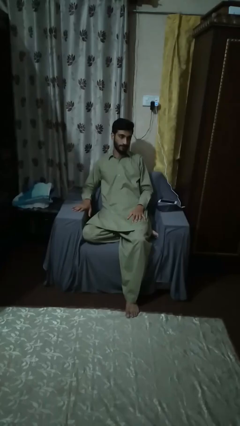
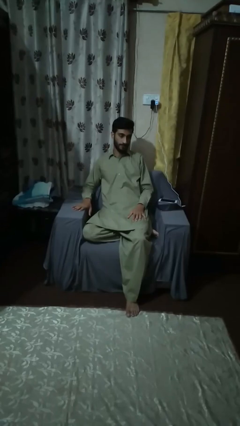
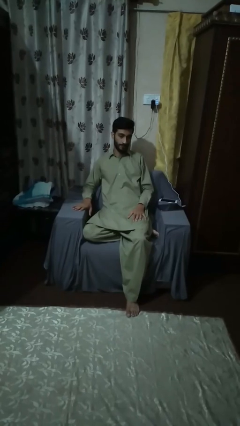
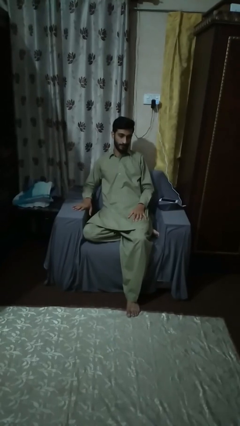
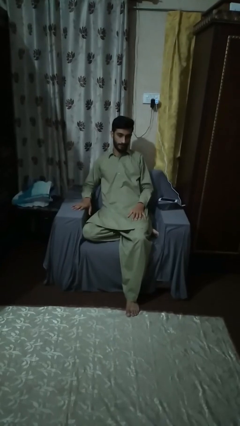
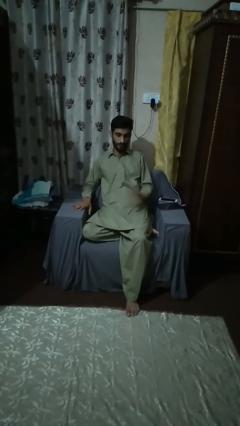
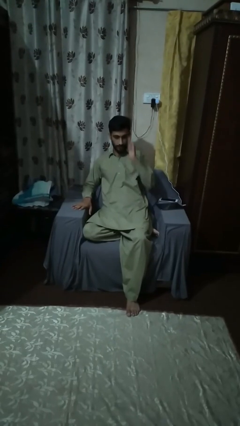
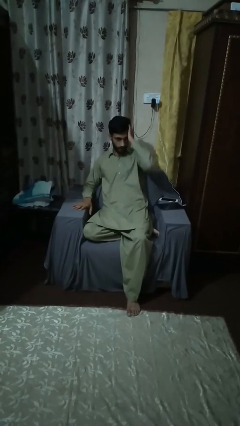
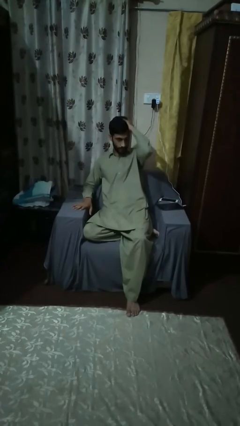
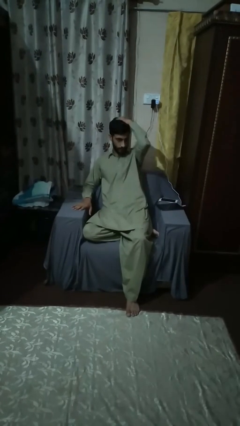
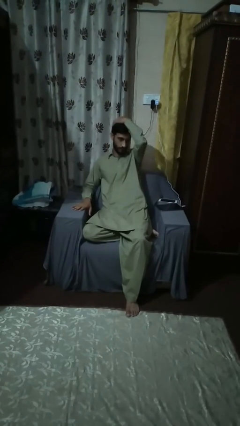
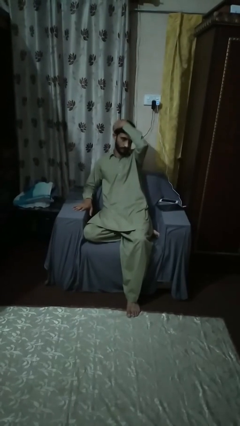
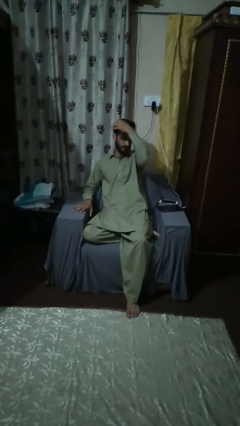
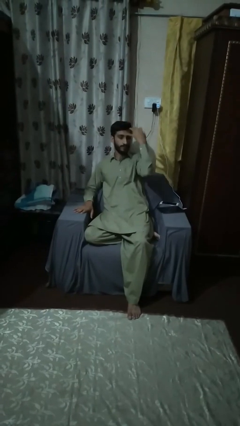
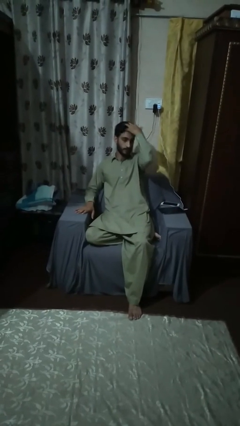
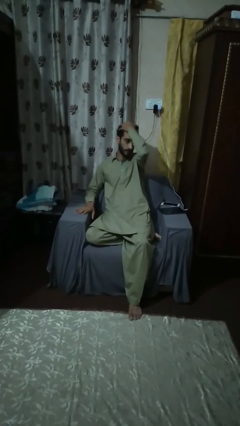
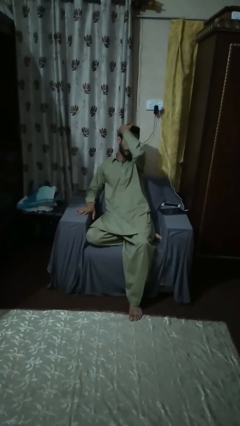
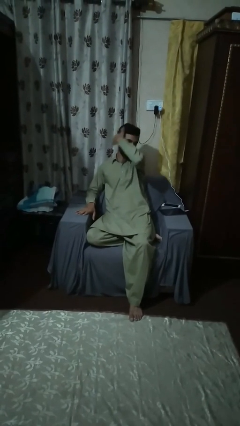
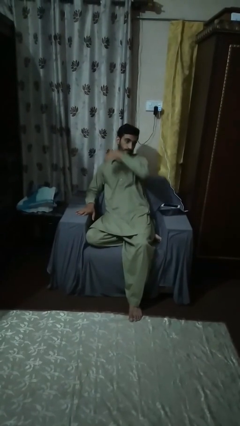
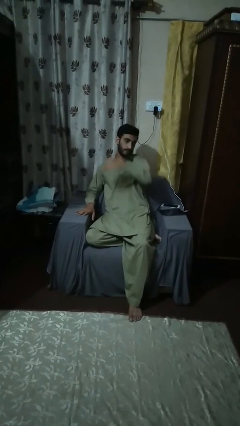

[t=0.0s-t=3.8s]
person strokes hair

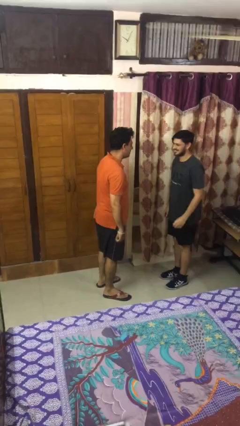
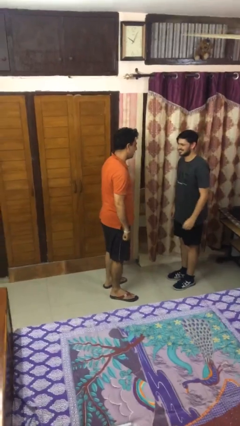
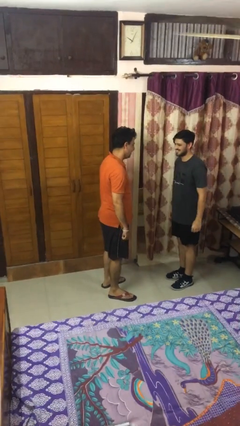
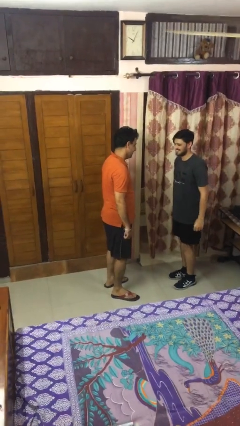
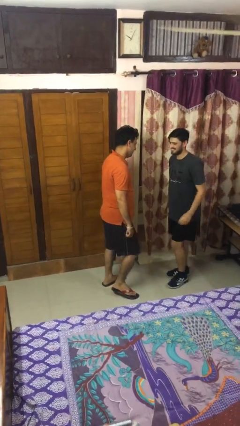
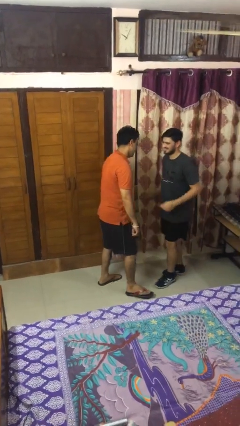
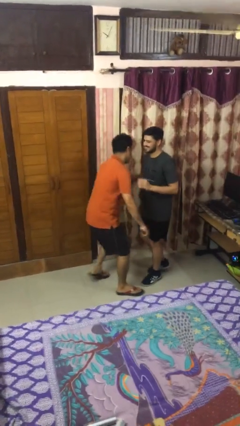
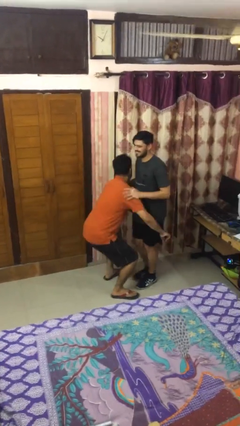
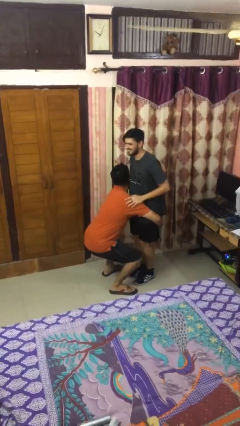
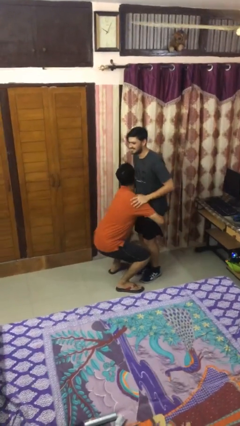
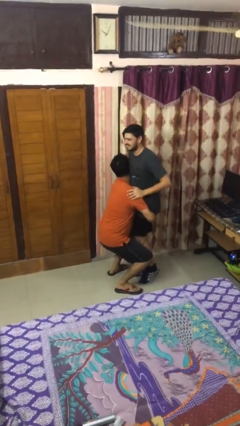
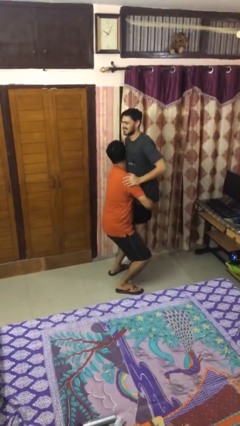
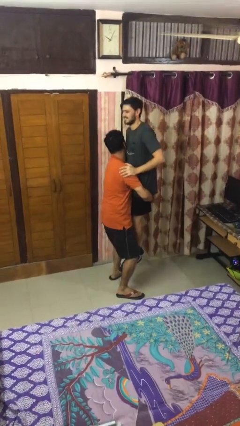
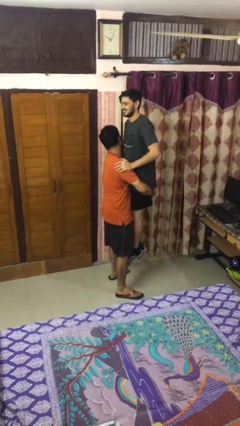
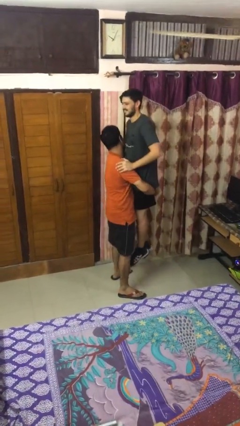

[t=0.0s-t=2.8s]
person picks up person

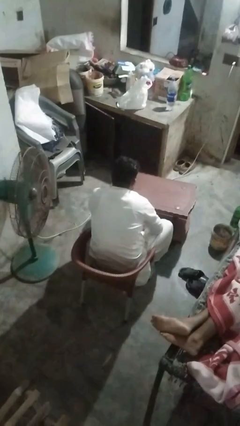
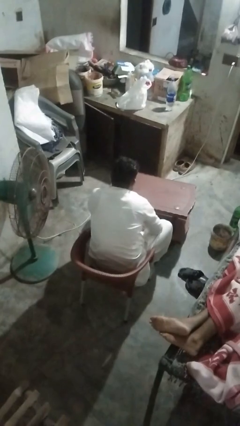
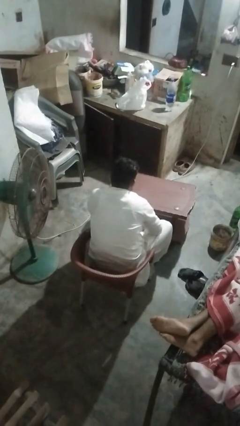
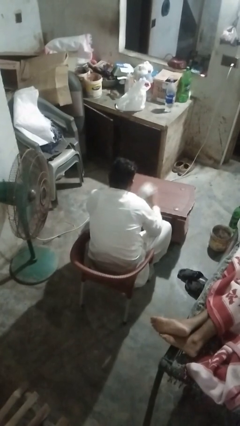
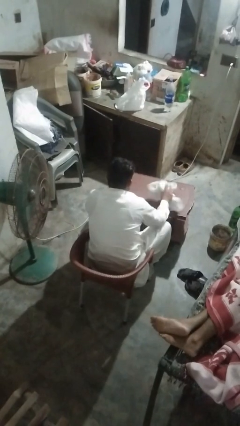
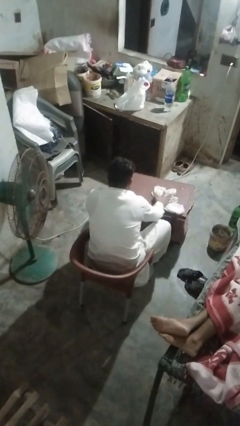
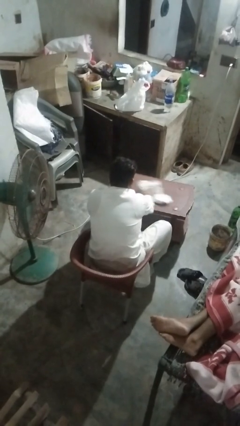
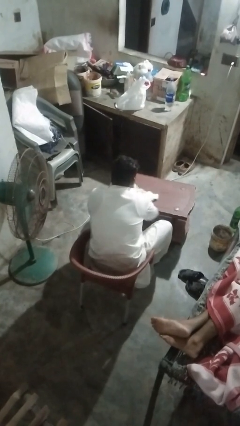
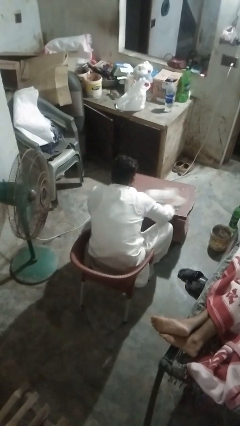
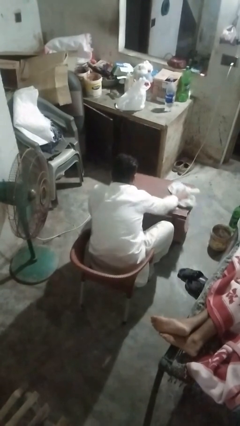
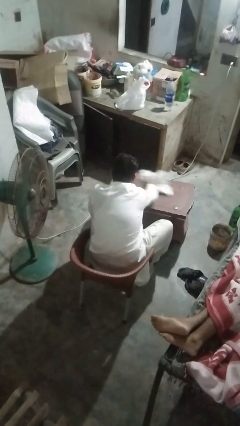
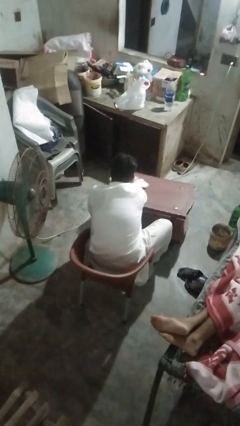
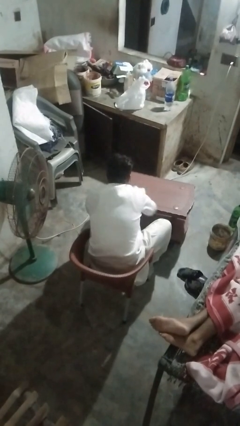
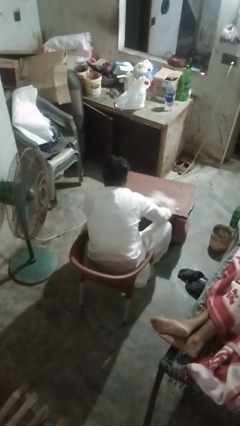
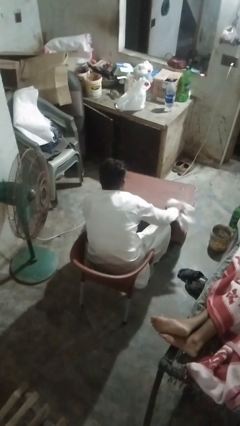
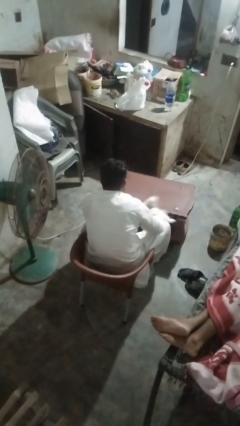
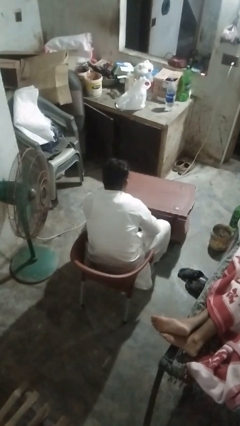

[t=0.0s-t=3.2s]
person cleans table with rag

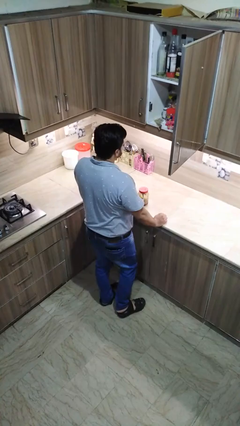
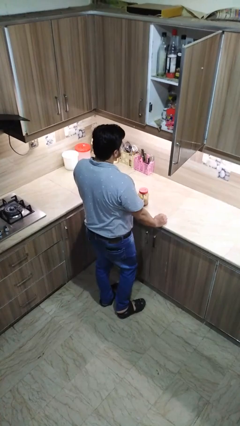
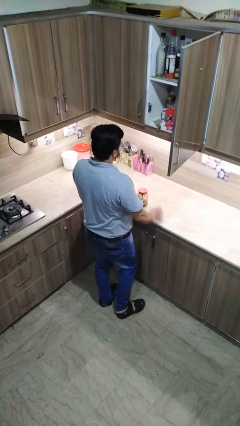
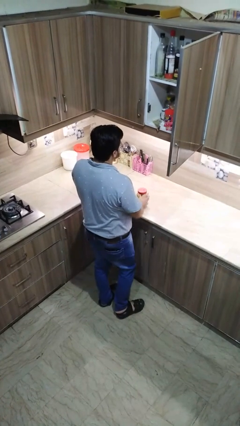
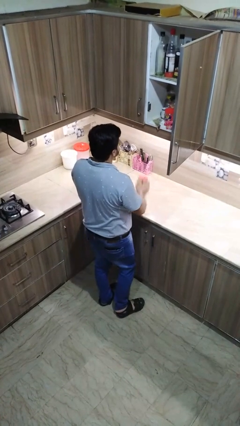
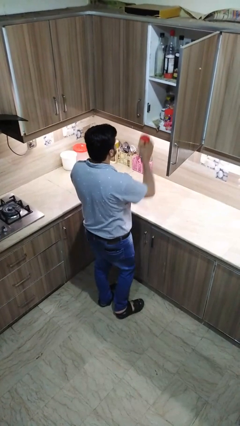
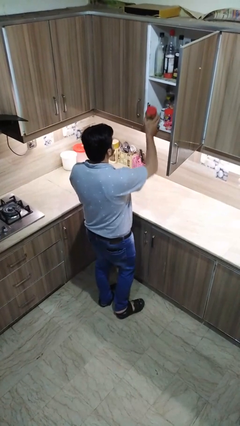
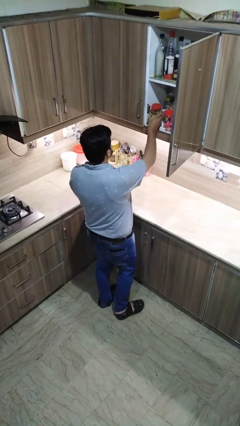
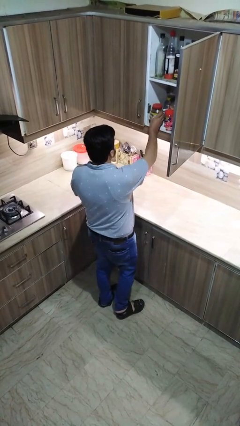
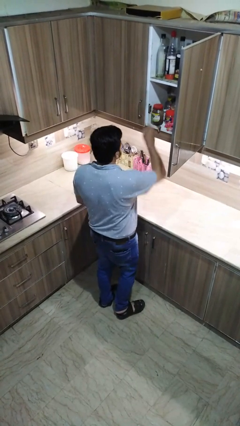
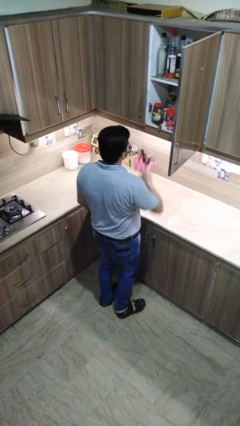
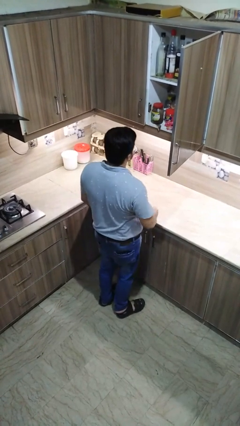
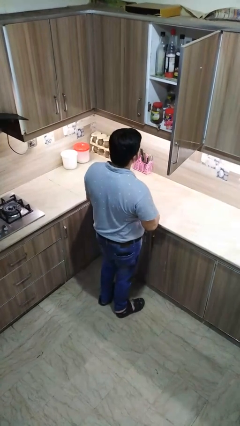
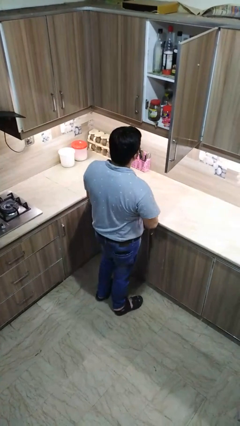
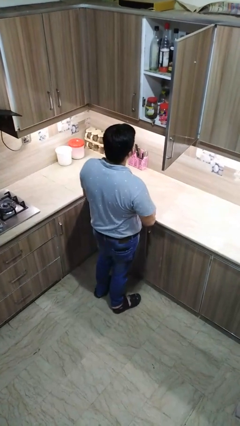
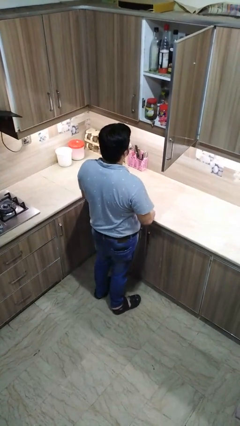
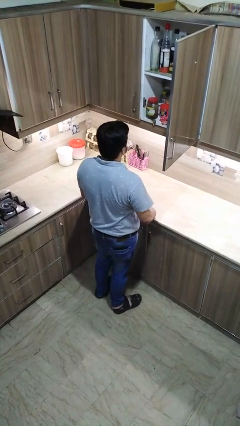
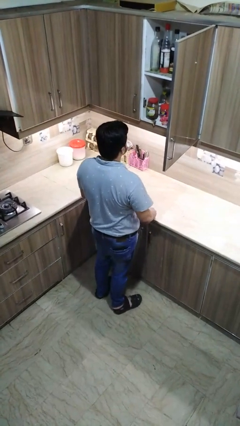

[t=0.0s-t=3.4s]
person takes object from cabinet

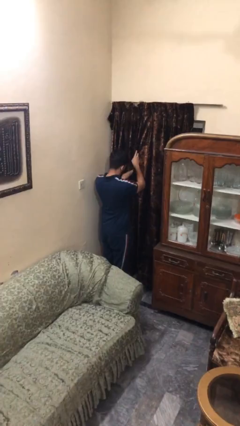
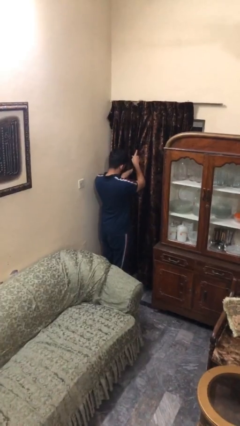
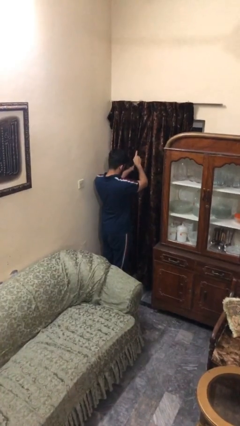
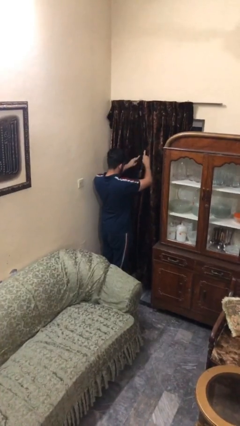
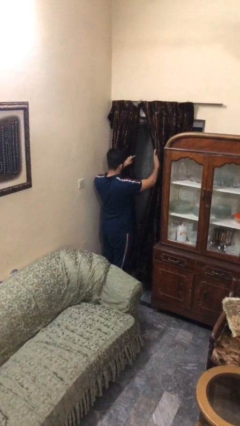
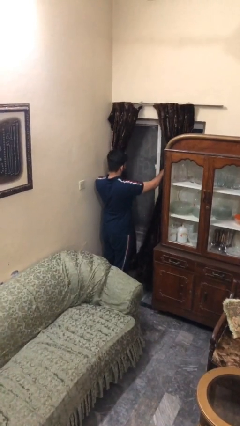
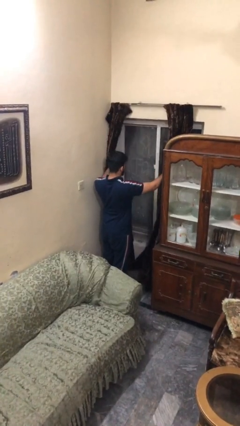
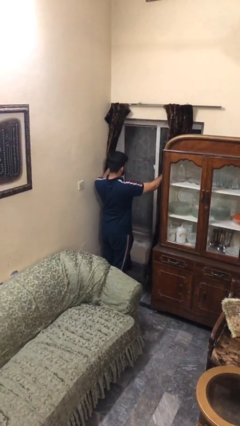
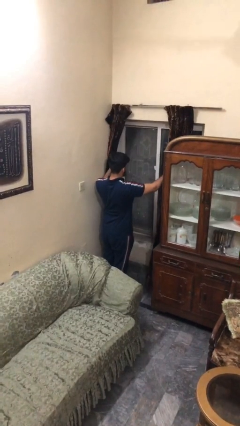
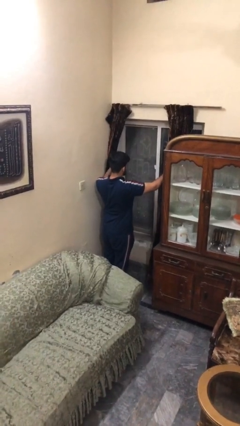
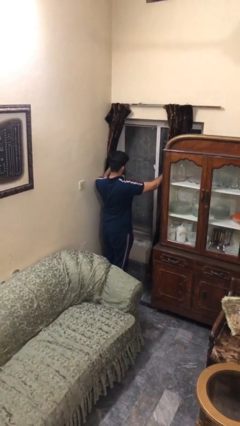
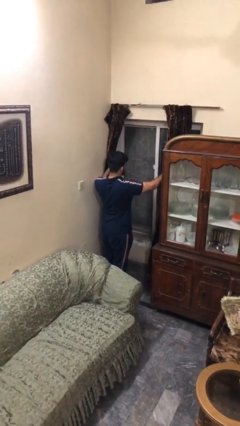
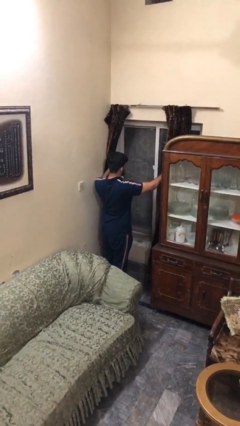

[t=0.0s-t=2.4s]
person opens curtains

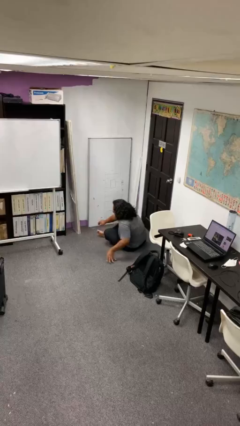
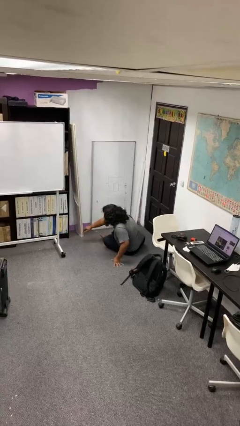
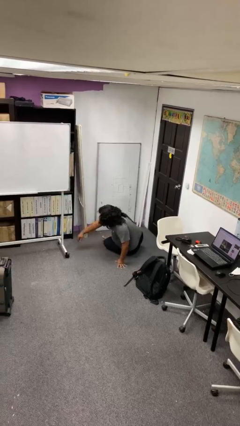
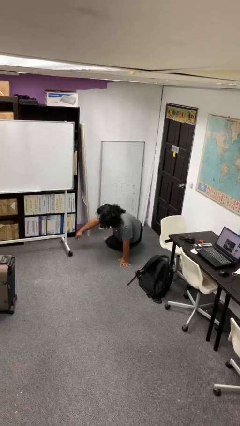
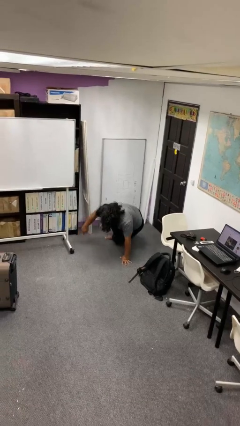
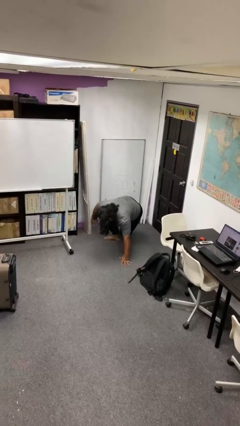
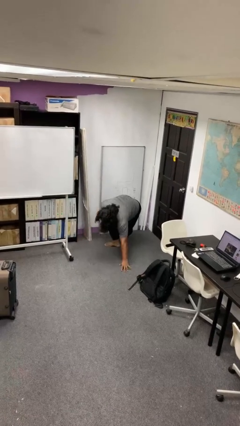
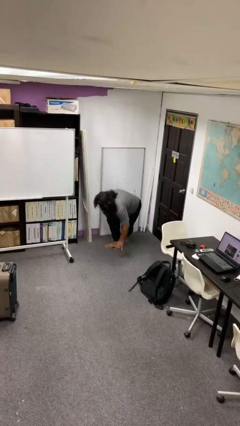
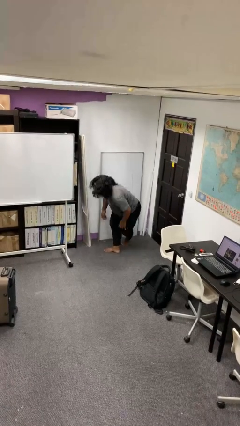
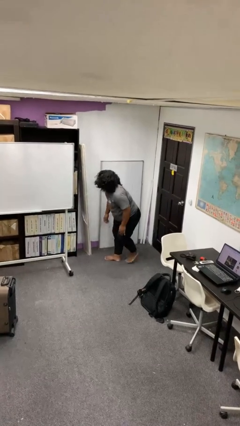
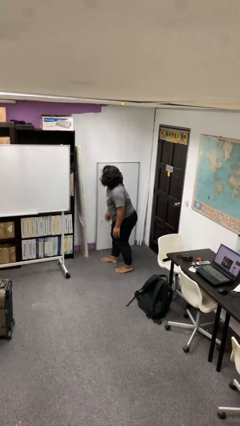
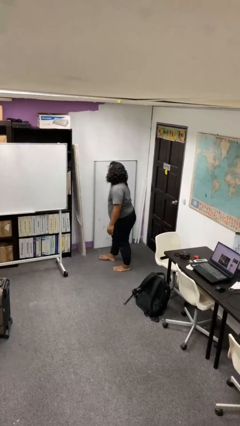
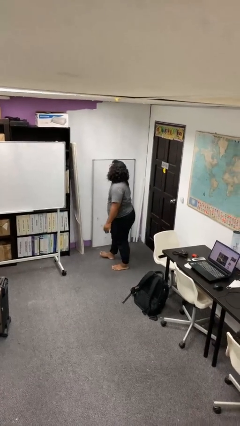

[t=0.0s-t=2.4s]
person stands up from floor
